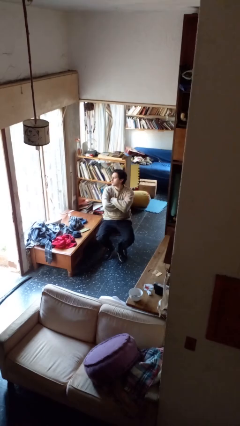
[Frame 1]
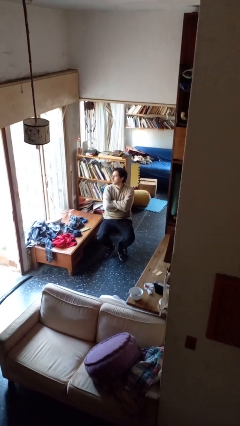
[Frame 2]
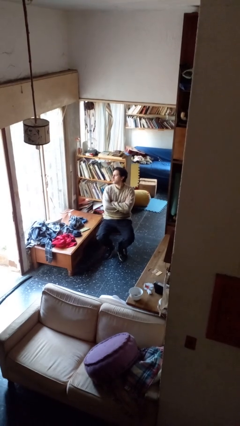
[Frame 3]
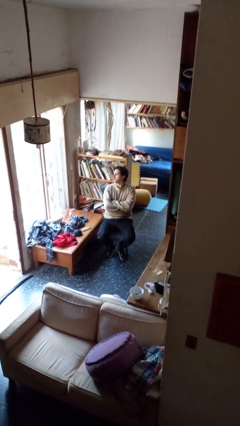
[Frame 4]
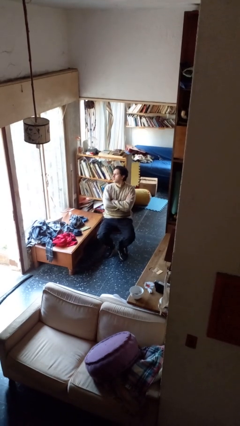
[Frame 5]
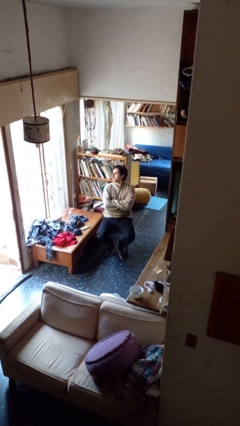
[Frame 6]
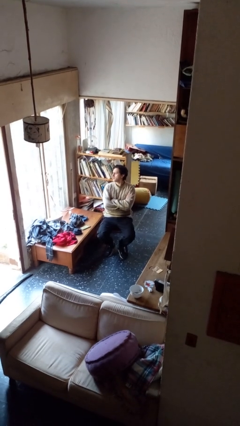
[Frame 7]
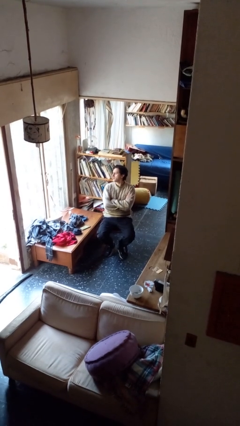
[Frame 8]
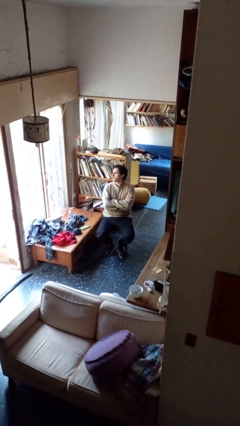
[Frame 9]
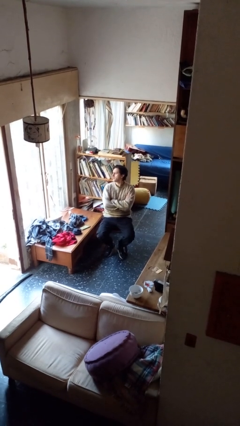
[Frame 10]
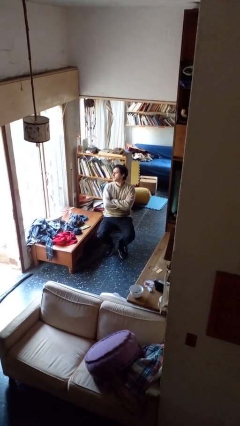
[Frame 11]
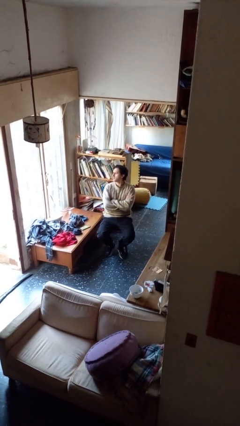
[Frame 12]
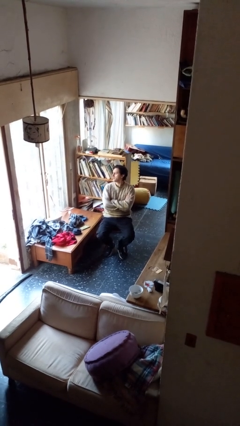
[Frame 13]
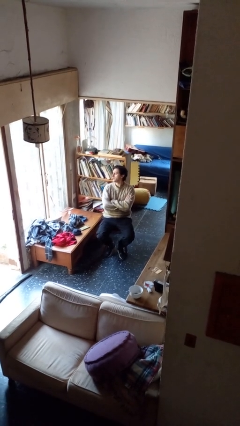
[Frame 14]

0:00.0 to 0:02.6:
person crosses arms

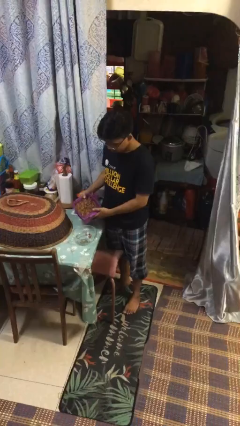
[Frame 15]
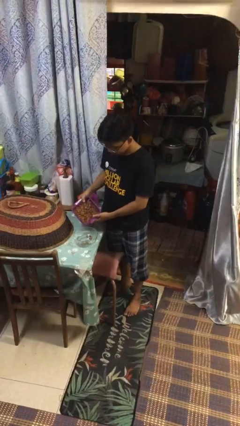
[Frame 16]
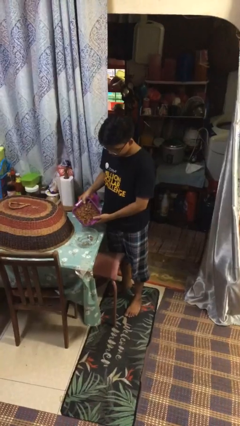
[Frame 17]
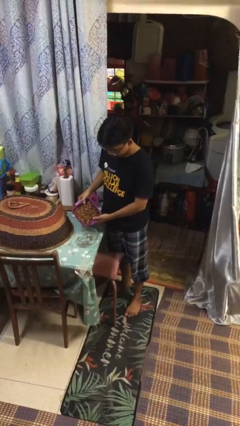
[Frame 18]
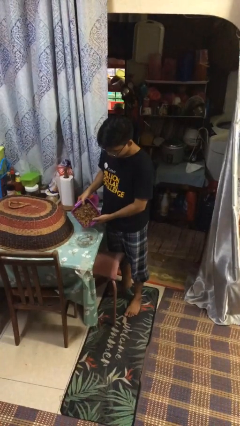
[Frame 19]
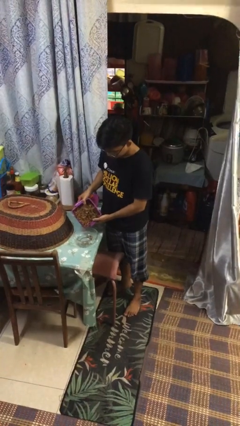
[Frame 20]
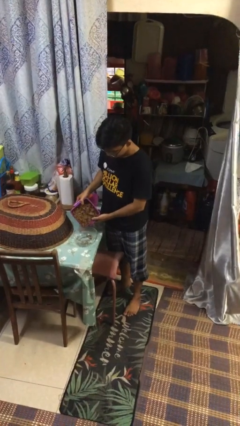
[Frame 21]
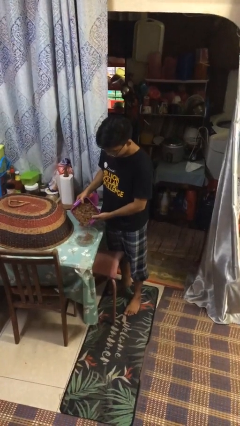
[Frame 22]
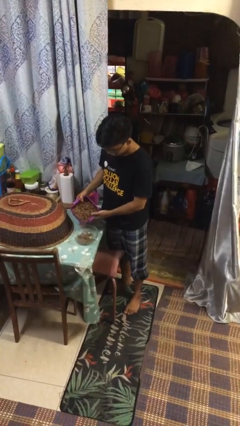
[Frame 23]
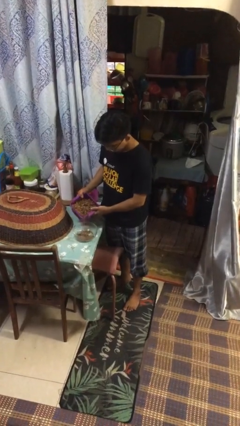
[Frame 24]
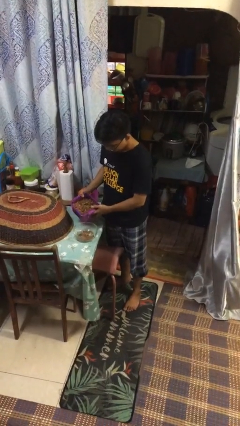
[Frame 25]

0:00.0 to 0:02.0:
person pours into bowl

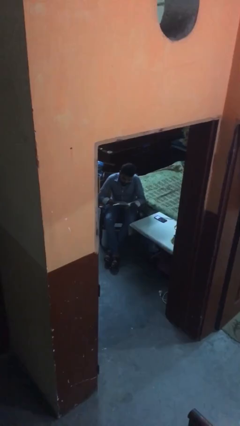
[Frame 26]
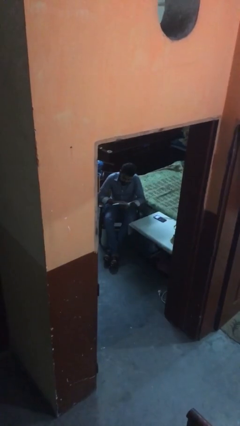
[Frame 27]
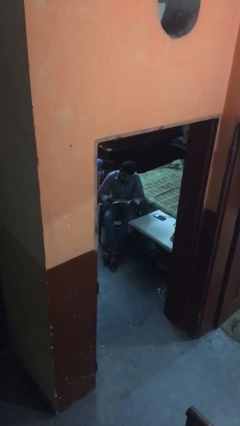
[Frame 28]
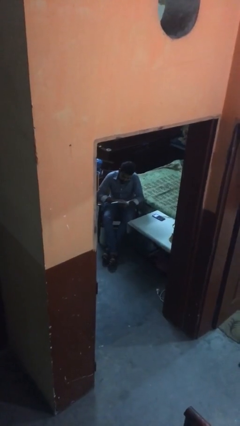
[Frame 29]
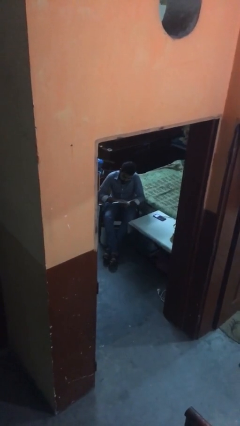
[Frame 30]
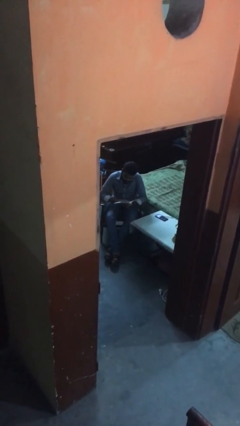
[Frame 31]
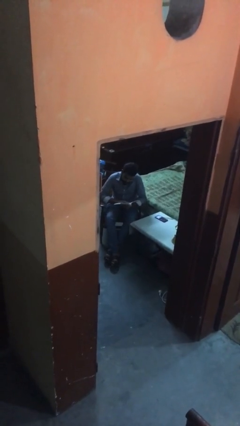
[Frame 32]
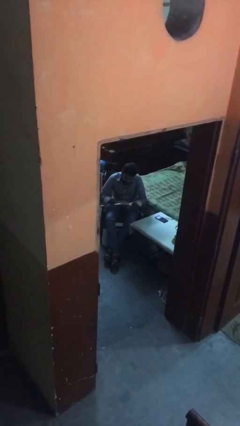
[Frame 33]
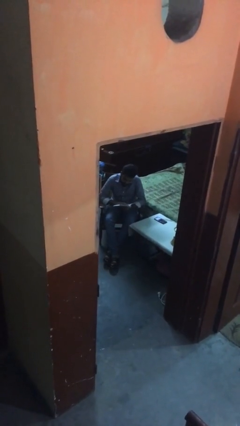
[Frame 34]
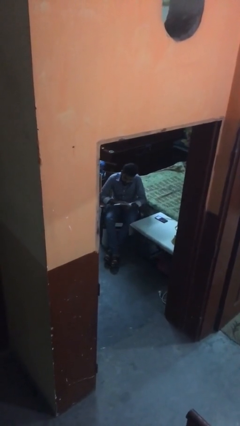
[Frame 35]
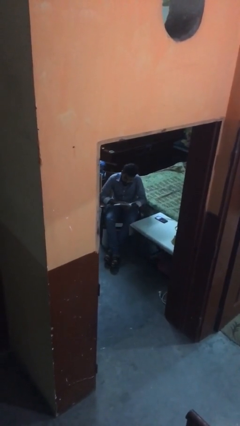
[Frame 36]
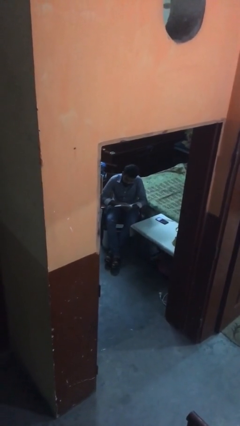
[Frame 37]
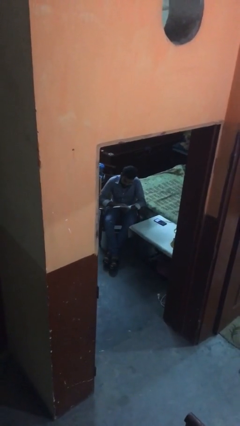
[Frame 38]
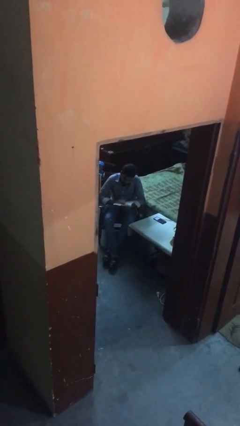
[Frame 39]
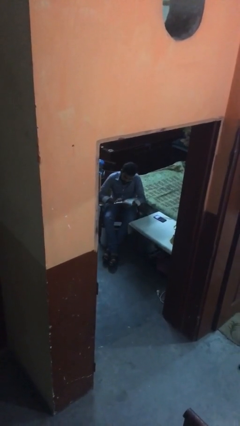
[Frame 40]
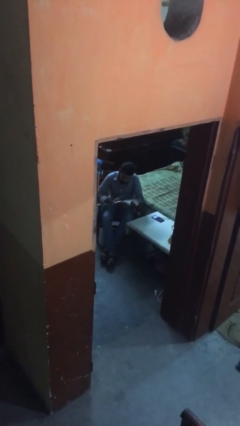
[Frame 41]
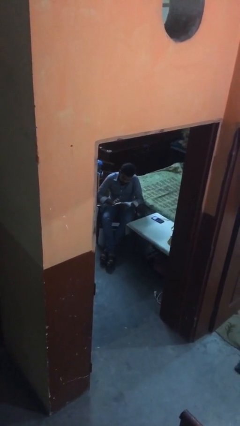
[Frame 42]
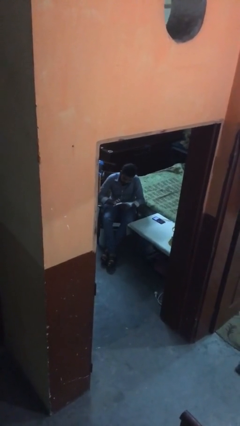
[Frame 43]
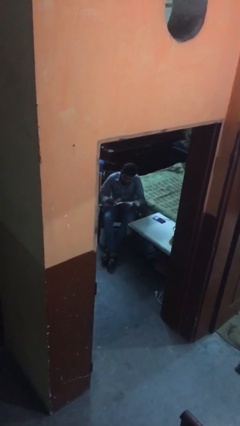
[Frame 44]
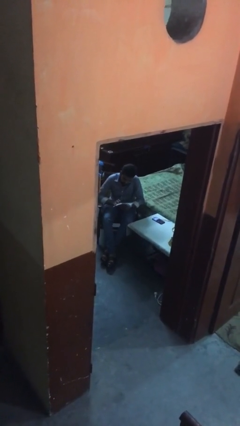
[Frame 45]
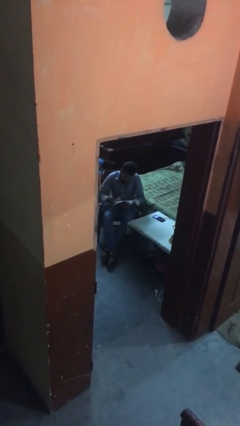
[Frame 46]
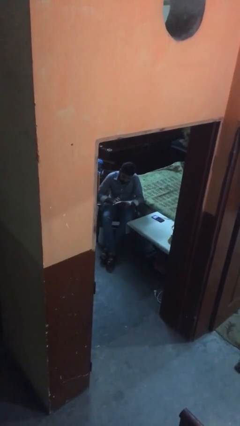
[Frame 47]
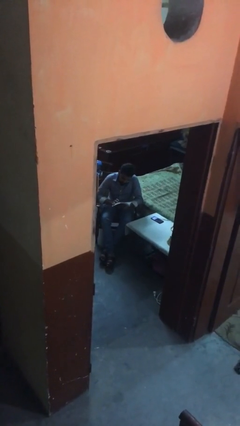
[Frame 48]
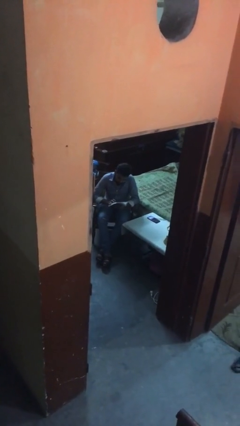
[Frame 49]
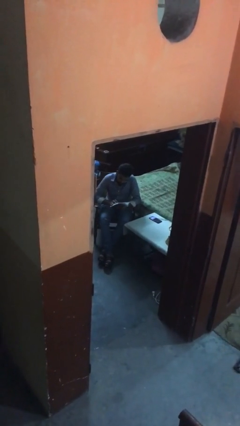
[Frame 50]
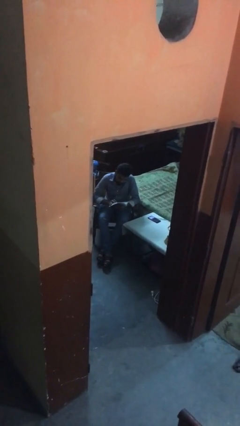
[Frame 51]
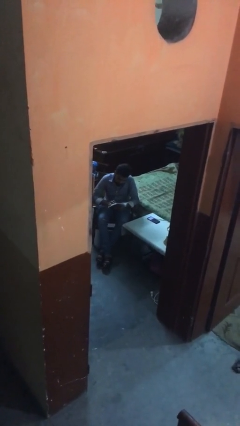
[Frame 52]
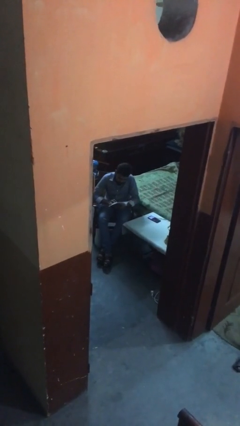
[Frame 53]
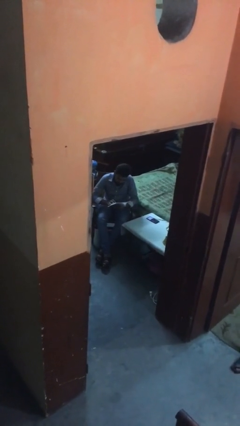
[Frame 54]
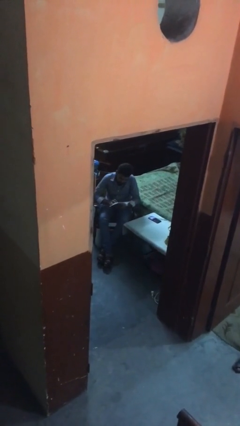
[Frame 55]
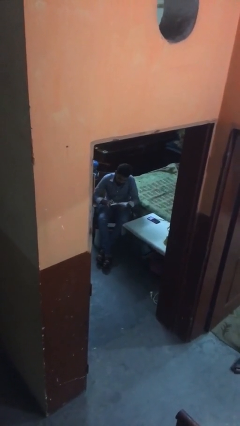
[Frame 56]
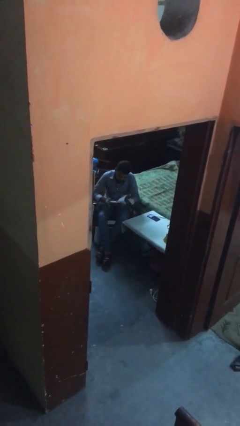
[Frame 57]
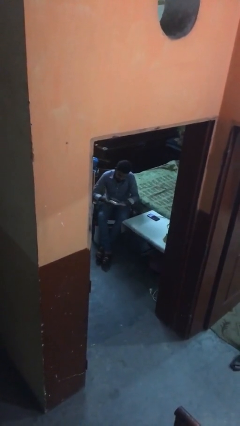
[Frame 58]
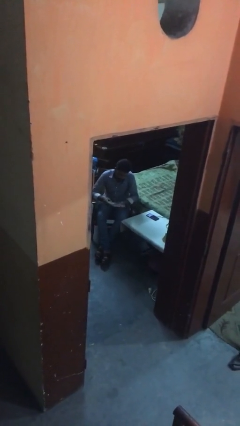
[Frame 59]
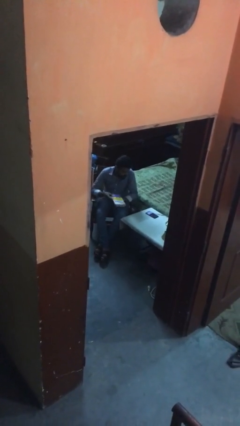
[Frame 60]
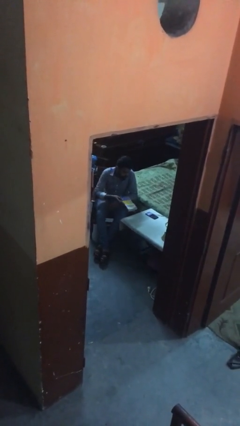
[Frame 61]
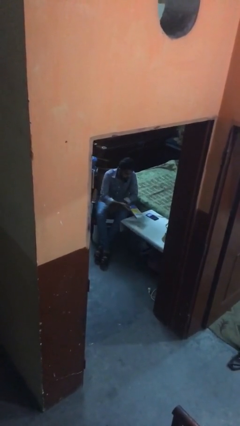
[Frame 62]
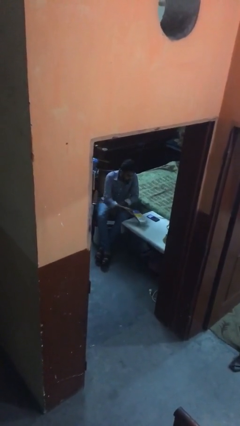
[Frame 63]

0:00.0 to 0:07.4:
person reads document

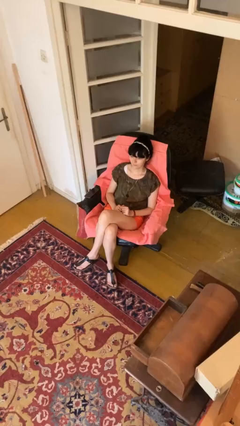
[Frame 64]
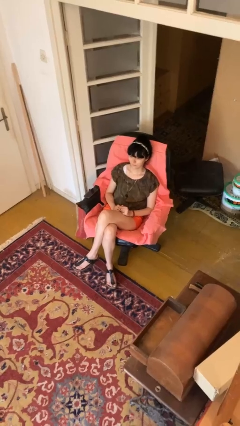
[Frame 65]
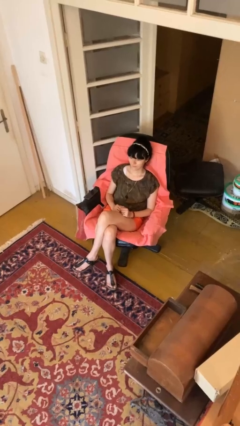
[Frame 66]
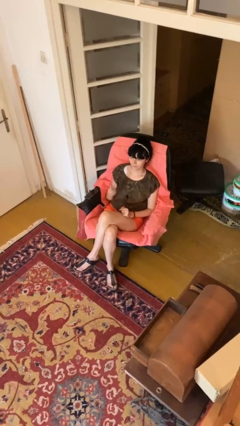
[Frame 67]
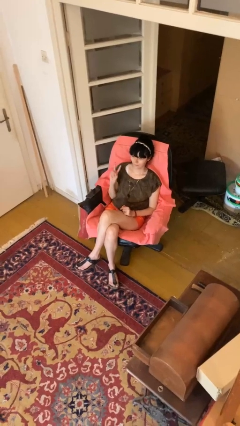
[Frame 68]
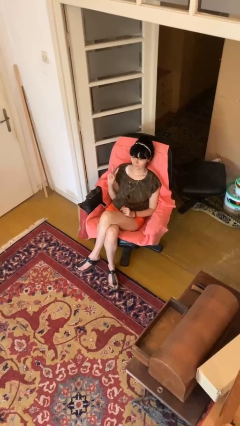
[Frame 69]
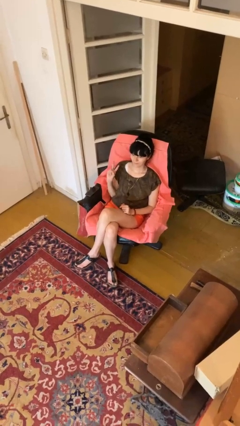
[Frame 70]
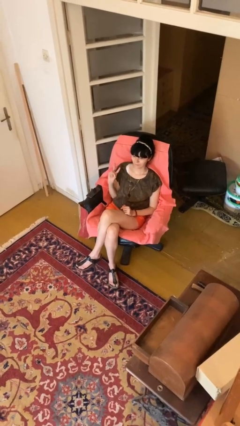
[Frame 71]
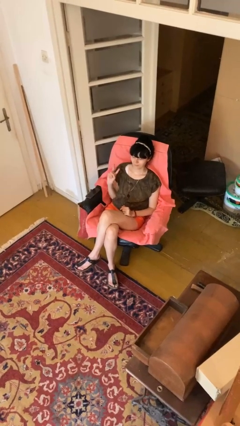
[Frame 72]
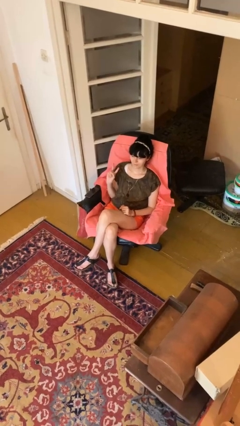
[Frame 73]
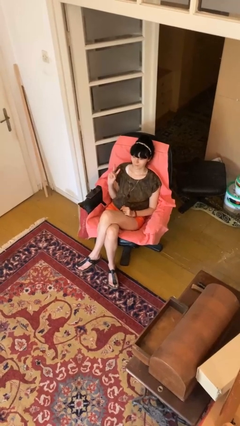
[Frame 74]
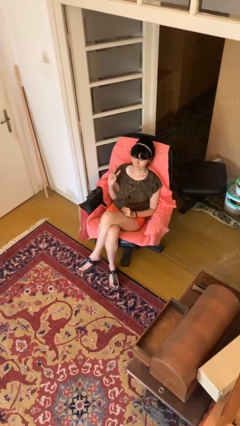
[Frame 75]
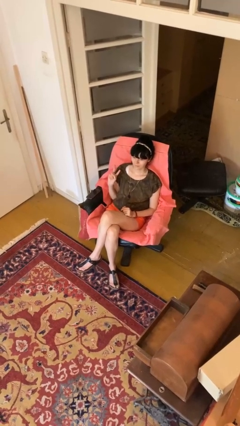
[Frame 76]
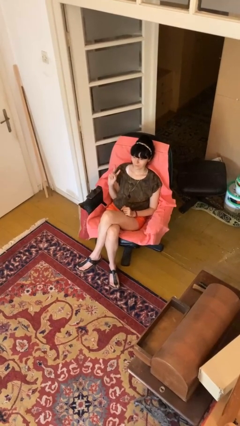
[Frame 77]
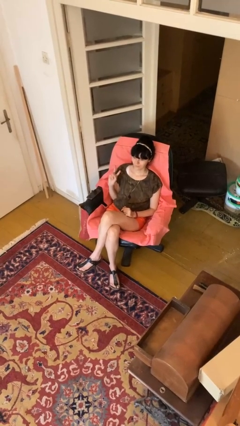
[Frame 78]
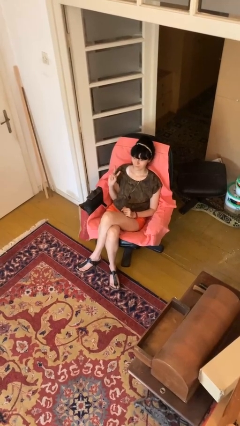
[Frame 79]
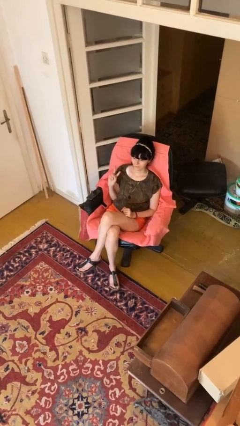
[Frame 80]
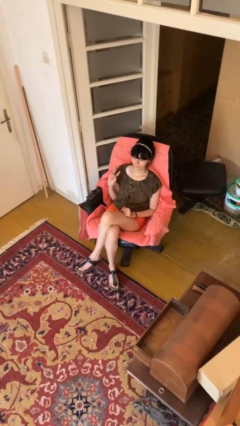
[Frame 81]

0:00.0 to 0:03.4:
person gestures peace

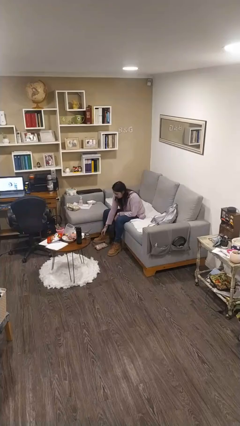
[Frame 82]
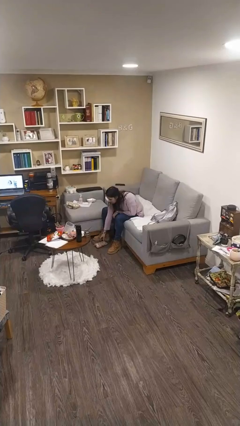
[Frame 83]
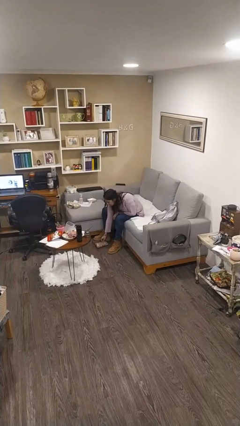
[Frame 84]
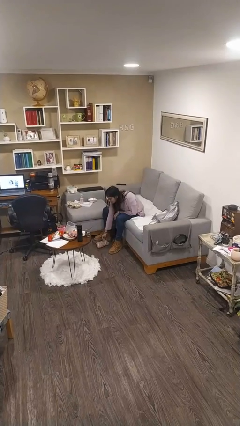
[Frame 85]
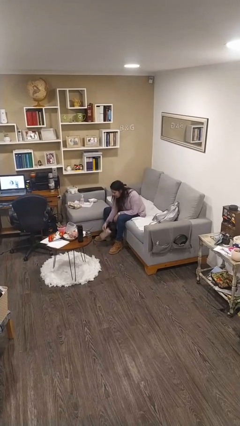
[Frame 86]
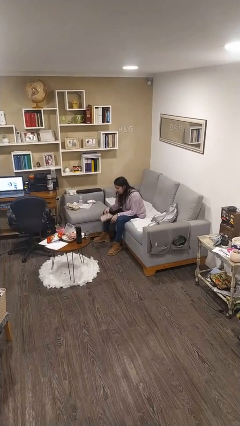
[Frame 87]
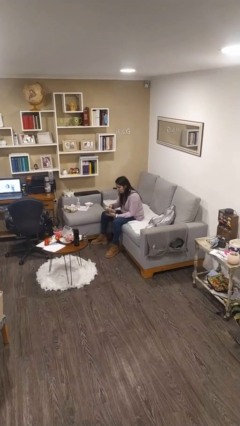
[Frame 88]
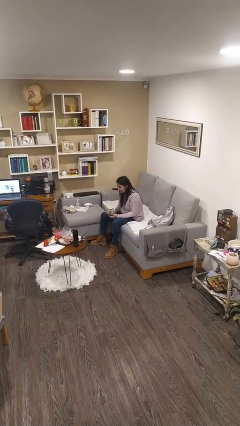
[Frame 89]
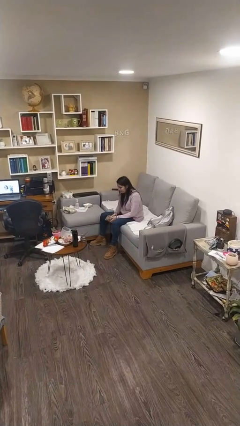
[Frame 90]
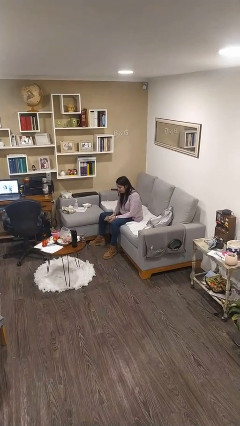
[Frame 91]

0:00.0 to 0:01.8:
person picks up object from floor

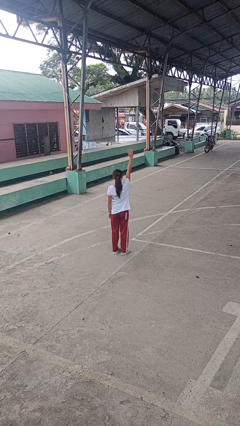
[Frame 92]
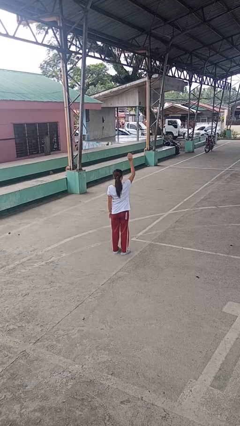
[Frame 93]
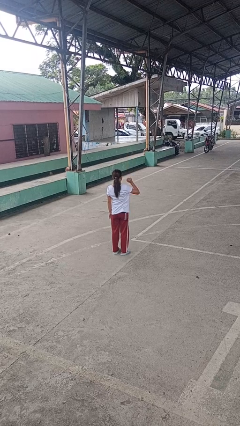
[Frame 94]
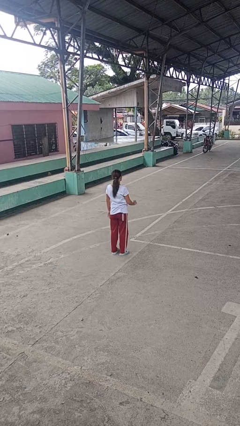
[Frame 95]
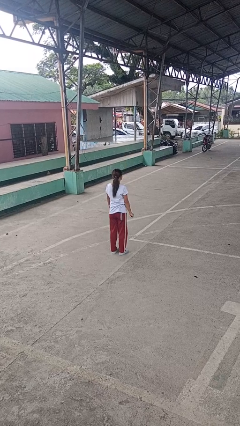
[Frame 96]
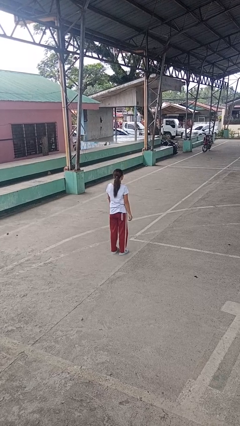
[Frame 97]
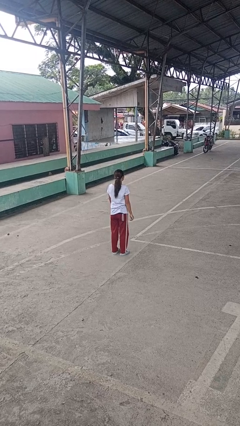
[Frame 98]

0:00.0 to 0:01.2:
person gestures lower hand
